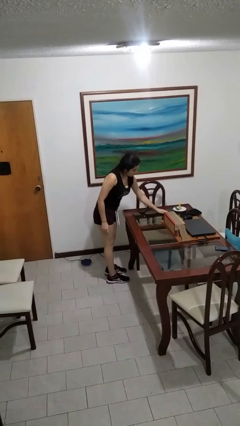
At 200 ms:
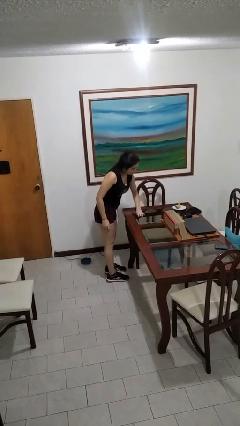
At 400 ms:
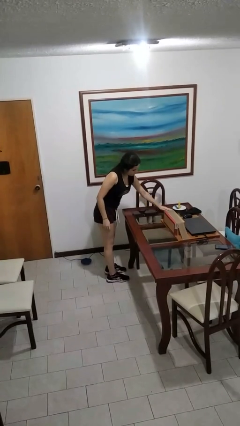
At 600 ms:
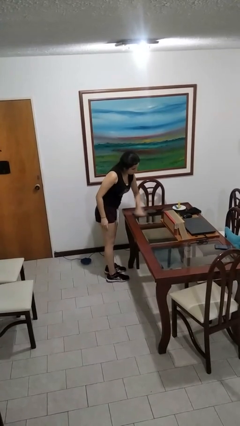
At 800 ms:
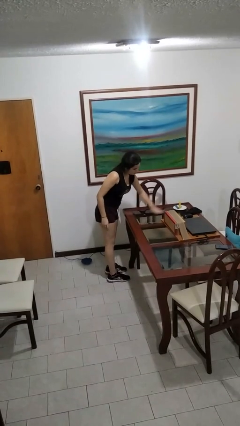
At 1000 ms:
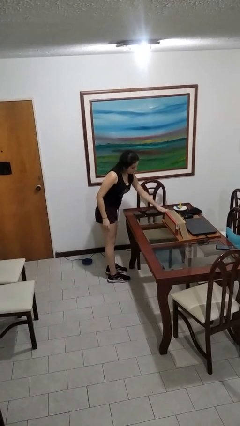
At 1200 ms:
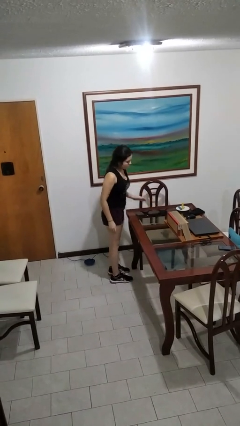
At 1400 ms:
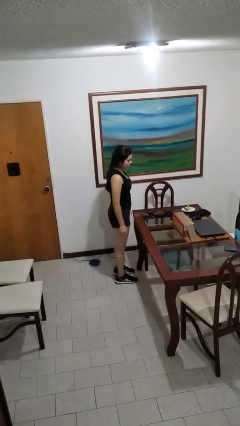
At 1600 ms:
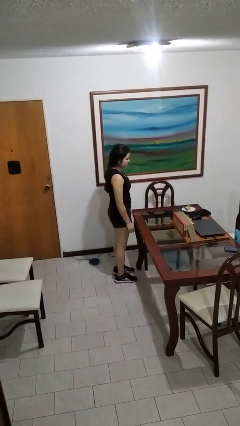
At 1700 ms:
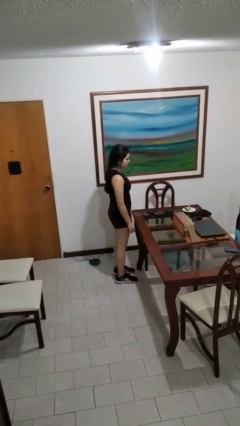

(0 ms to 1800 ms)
person cleans table with rag

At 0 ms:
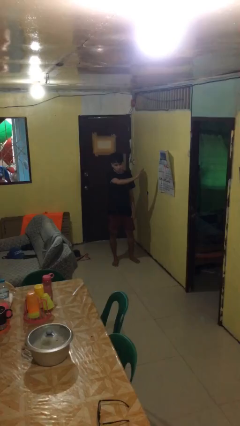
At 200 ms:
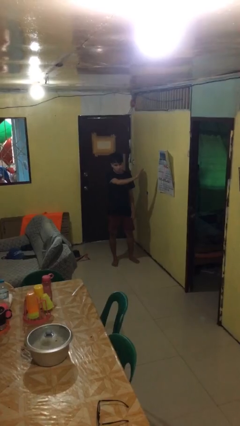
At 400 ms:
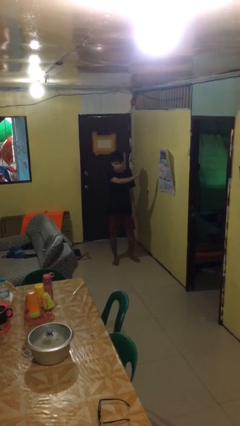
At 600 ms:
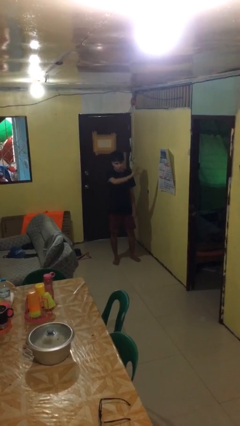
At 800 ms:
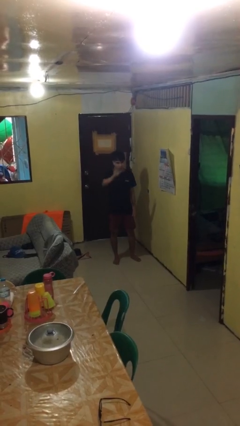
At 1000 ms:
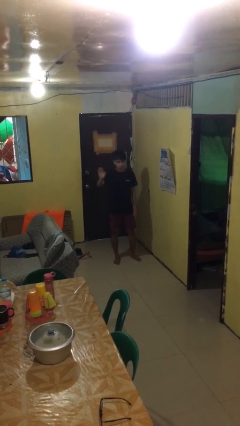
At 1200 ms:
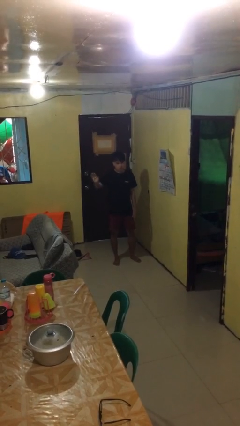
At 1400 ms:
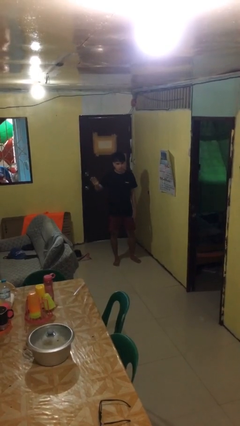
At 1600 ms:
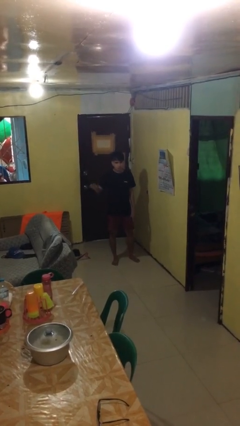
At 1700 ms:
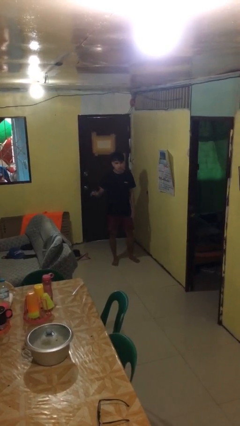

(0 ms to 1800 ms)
person gestures swipe right

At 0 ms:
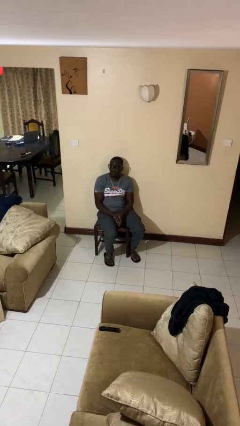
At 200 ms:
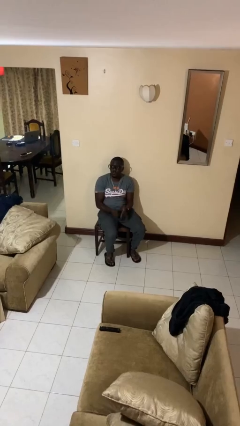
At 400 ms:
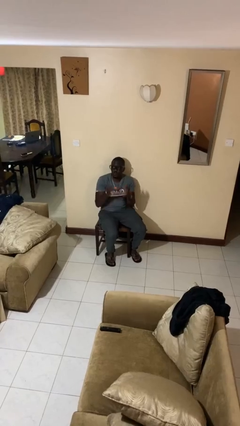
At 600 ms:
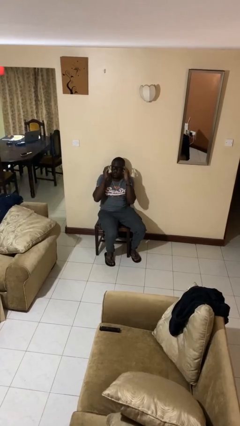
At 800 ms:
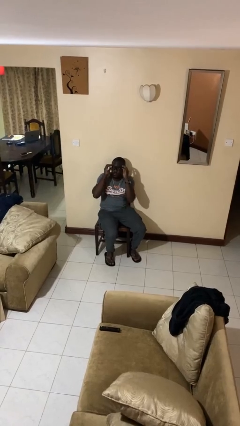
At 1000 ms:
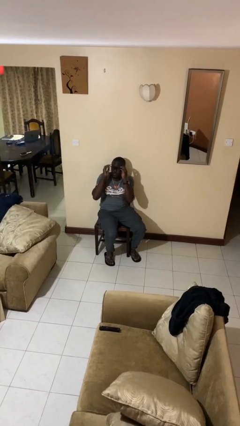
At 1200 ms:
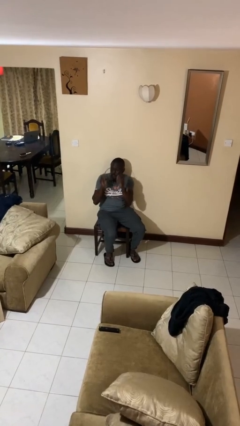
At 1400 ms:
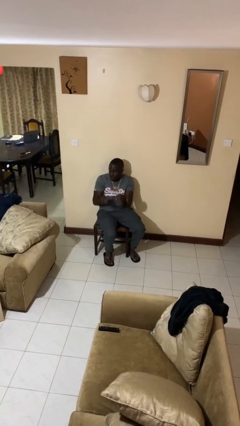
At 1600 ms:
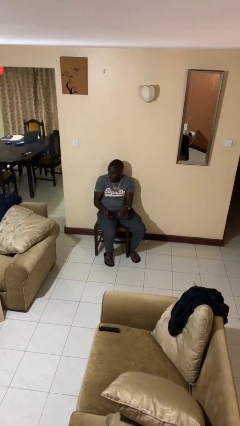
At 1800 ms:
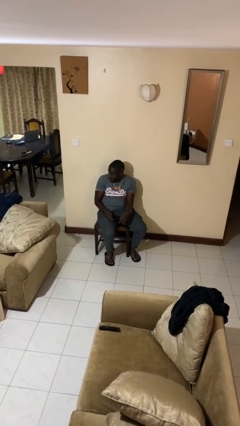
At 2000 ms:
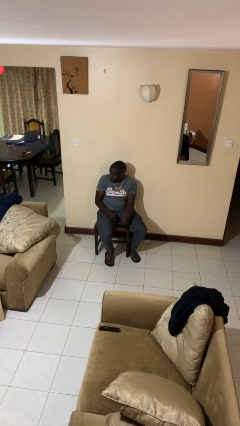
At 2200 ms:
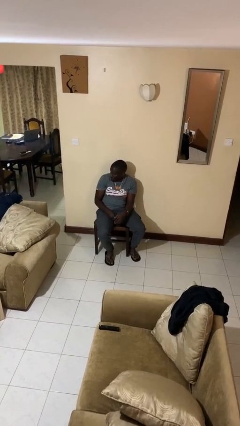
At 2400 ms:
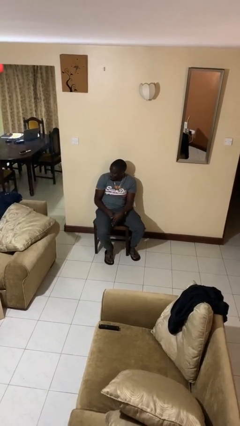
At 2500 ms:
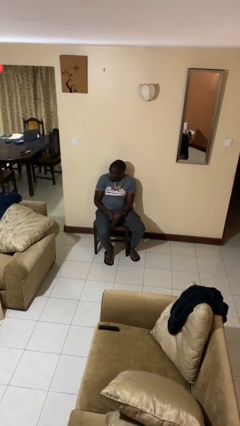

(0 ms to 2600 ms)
person takes off glasses

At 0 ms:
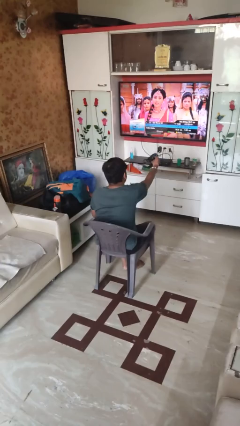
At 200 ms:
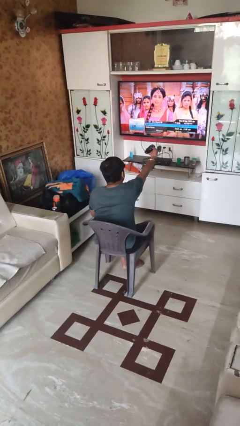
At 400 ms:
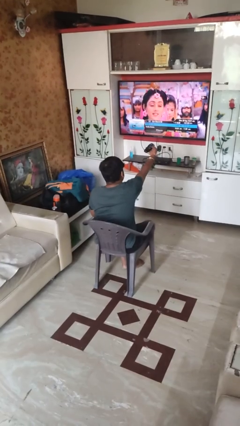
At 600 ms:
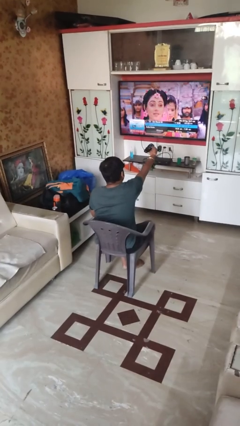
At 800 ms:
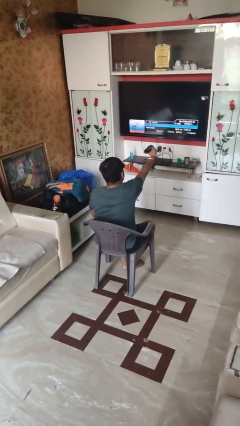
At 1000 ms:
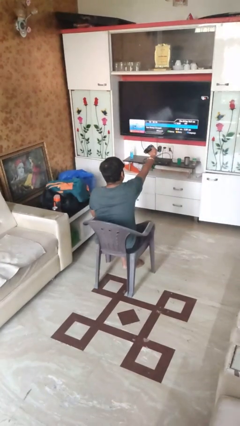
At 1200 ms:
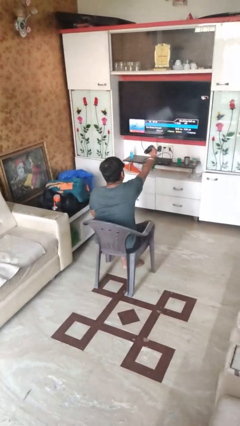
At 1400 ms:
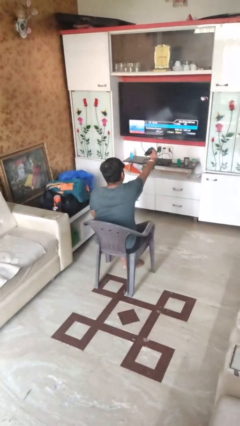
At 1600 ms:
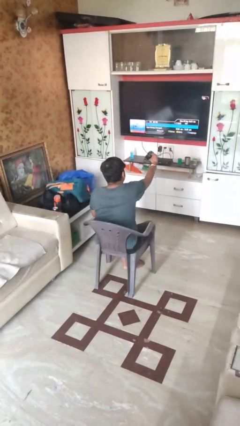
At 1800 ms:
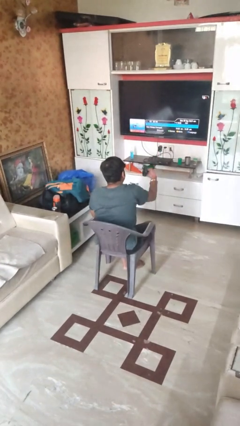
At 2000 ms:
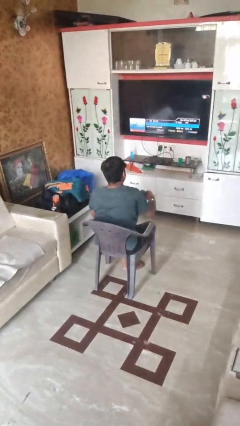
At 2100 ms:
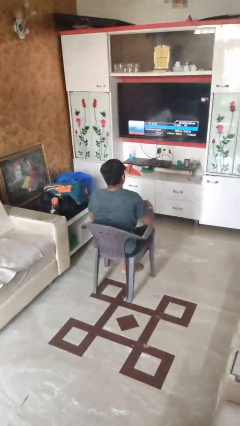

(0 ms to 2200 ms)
person uses television remote

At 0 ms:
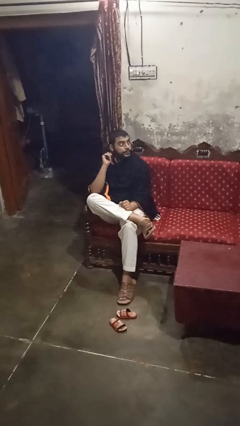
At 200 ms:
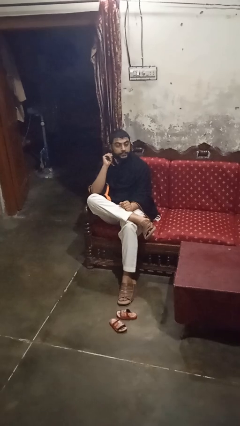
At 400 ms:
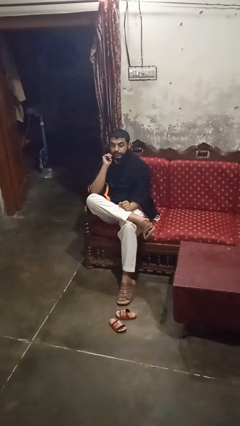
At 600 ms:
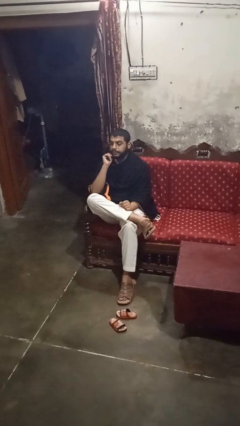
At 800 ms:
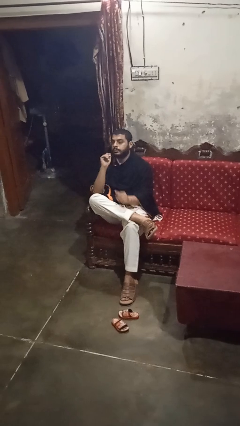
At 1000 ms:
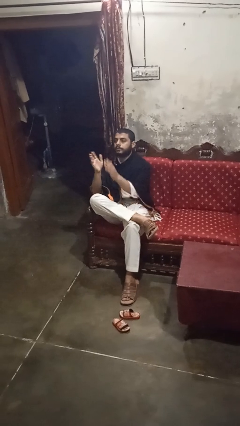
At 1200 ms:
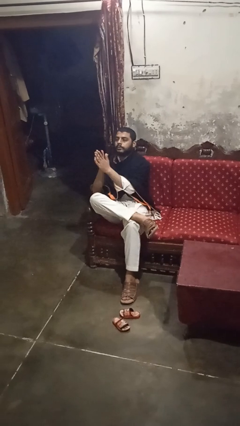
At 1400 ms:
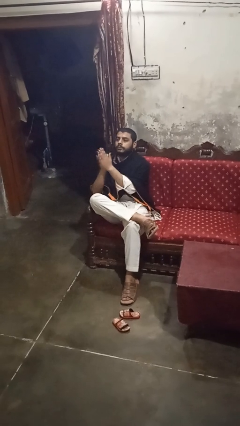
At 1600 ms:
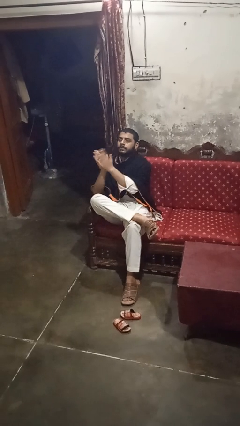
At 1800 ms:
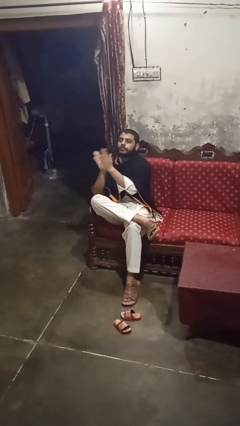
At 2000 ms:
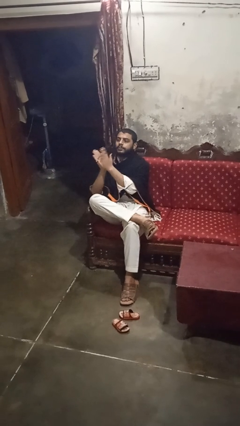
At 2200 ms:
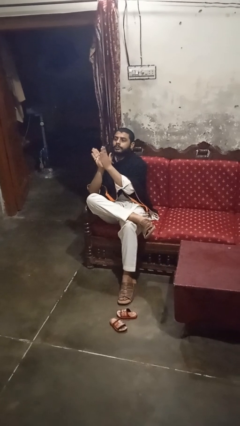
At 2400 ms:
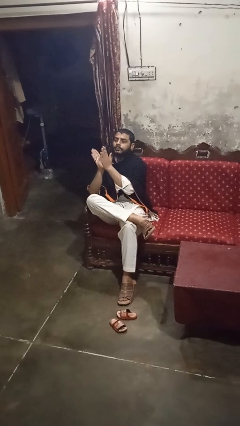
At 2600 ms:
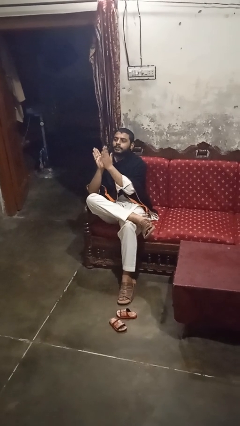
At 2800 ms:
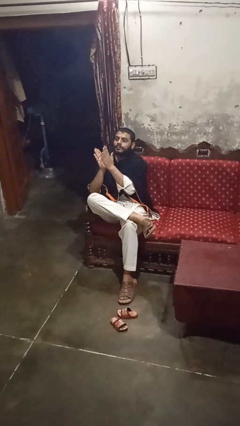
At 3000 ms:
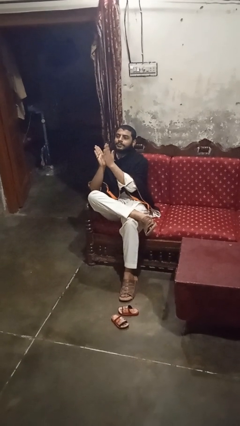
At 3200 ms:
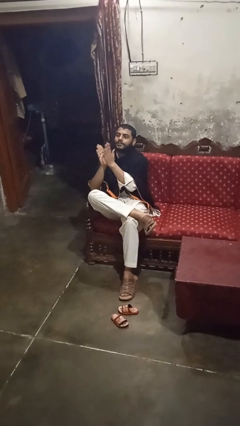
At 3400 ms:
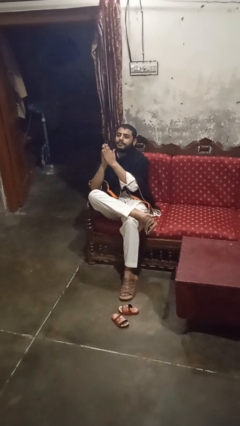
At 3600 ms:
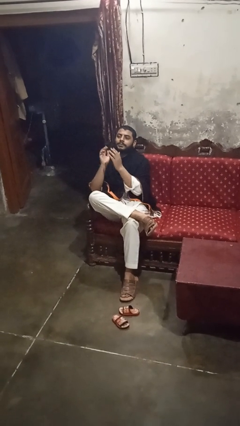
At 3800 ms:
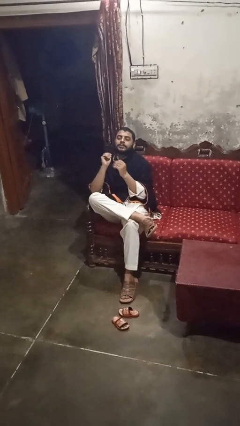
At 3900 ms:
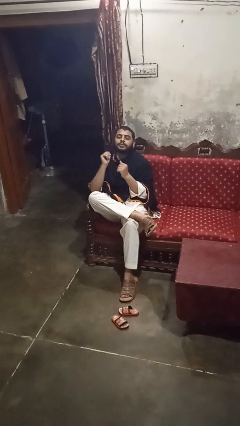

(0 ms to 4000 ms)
person claps hands

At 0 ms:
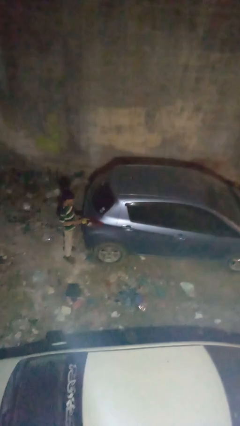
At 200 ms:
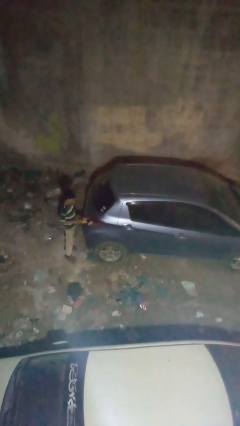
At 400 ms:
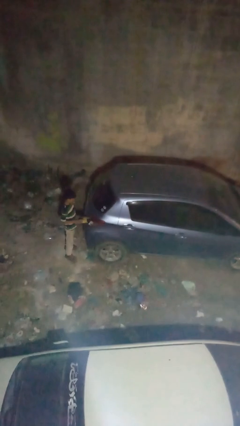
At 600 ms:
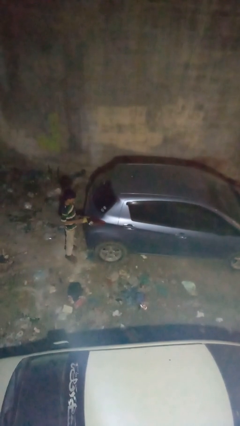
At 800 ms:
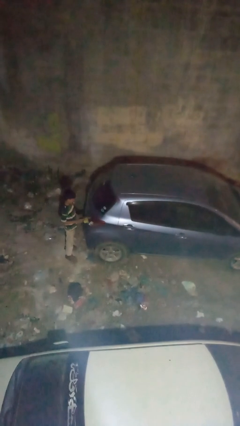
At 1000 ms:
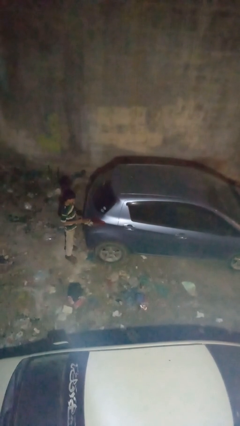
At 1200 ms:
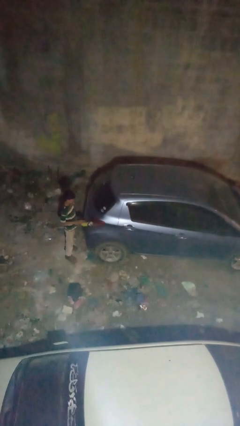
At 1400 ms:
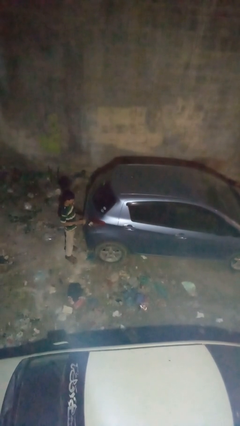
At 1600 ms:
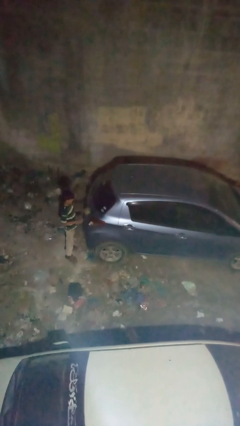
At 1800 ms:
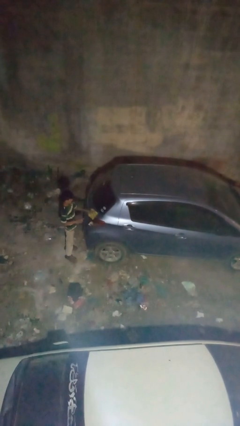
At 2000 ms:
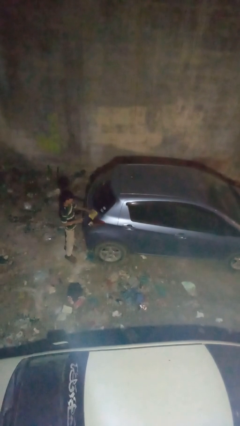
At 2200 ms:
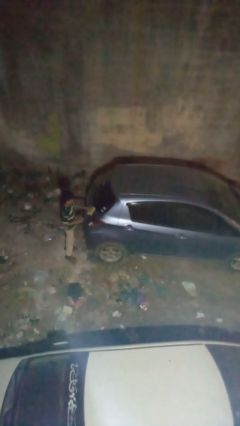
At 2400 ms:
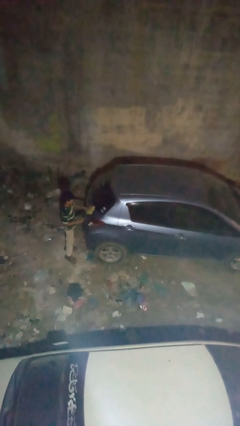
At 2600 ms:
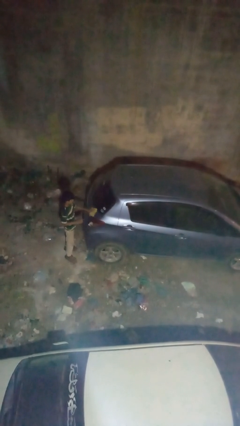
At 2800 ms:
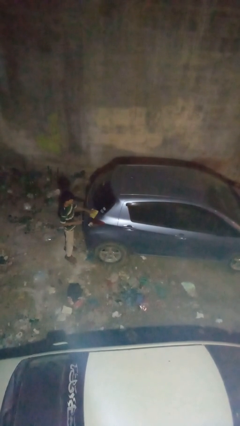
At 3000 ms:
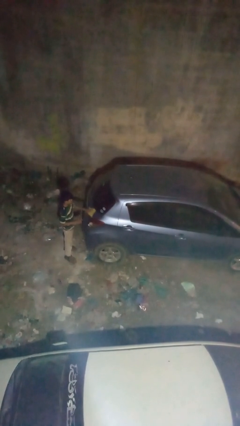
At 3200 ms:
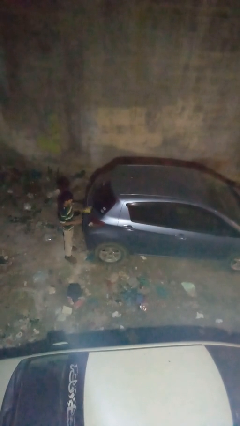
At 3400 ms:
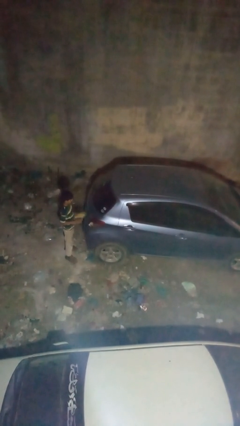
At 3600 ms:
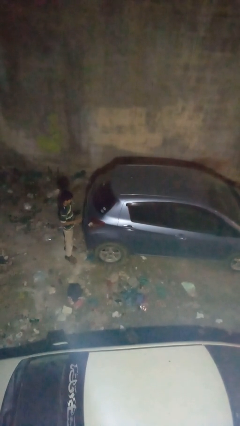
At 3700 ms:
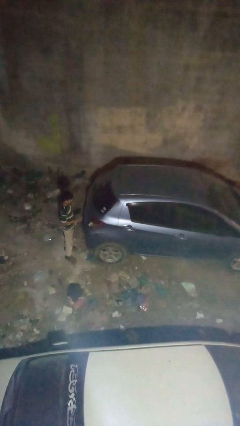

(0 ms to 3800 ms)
person polishes car with rag

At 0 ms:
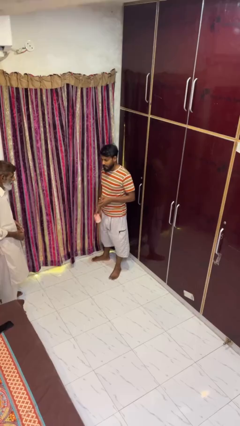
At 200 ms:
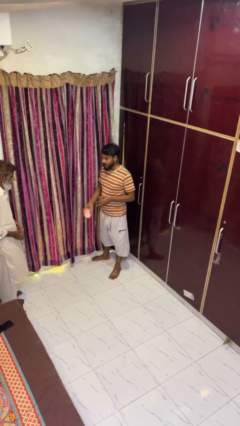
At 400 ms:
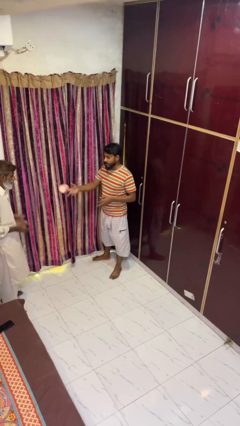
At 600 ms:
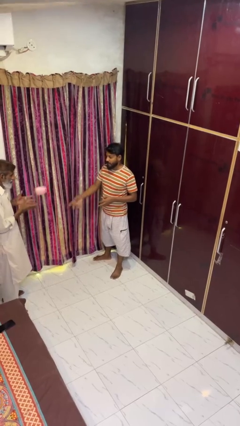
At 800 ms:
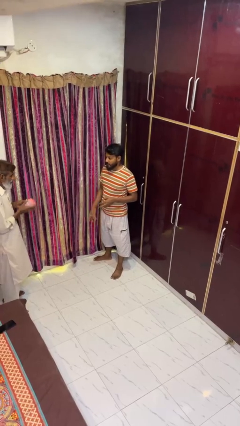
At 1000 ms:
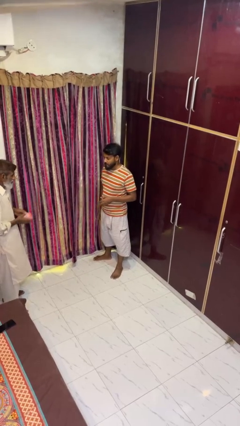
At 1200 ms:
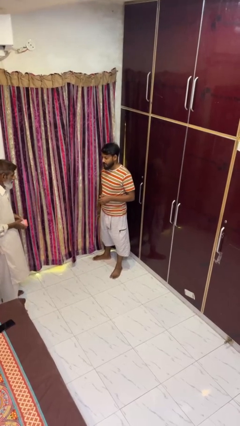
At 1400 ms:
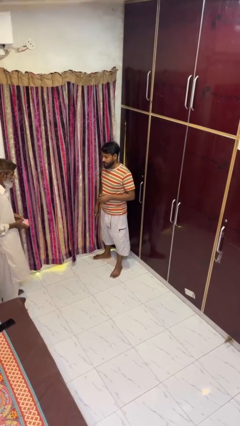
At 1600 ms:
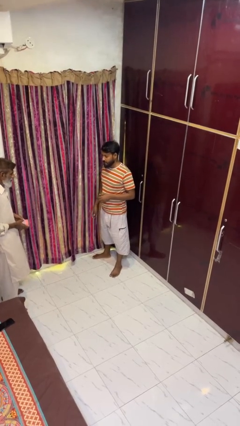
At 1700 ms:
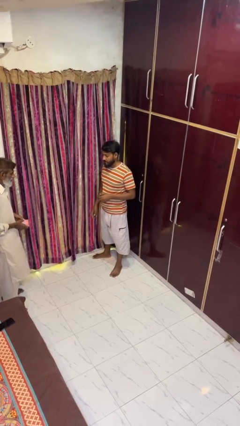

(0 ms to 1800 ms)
person throws object to person
